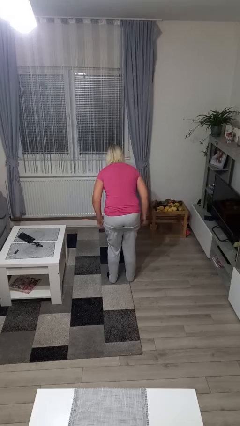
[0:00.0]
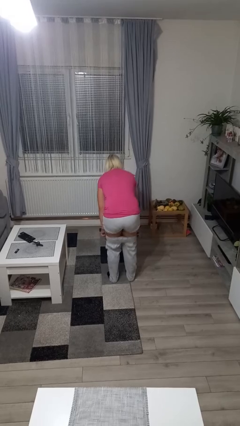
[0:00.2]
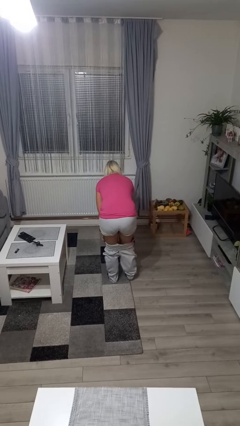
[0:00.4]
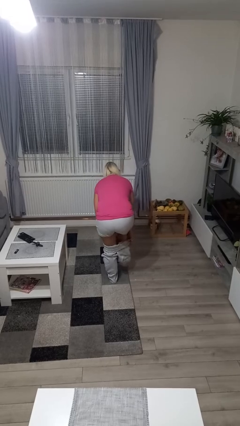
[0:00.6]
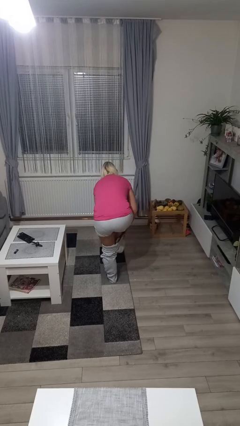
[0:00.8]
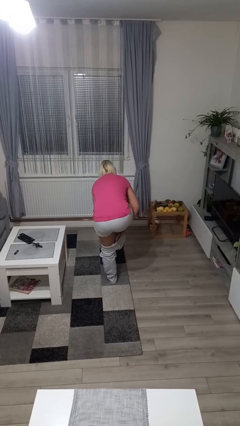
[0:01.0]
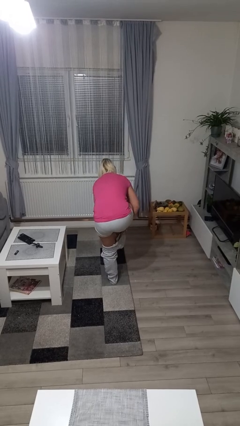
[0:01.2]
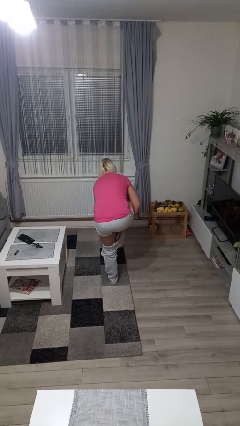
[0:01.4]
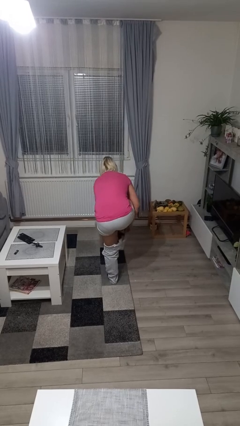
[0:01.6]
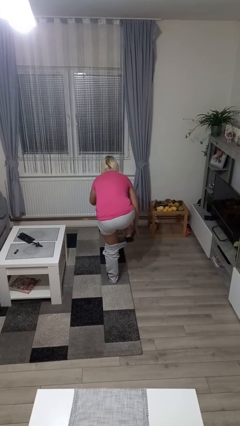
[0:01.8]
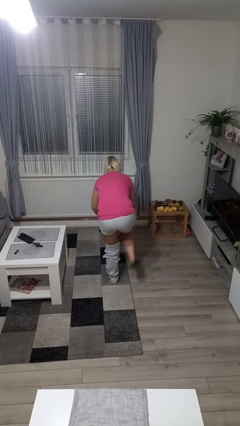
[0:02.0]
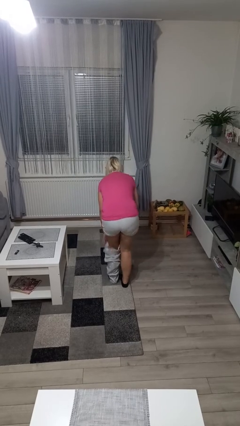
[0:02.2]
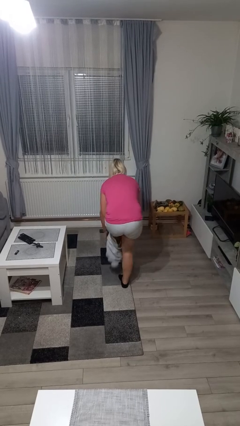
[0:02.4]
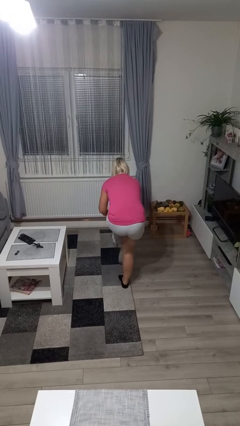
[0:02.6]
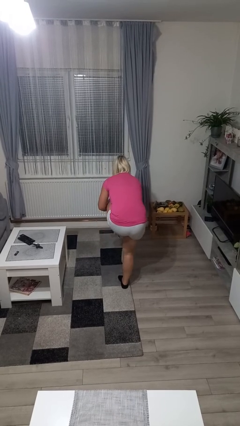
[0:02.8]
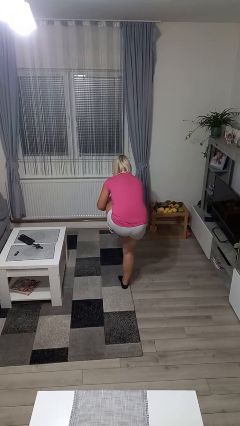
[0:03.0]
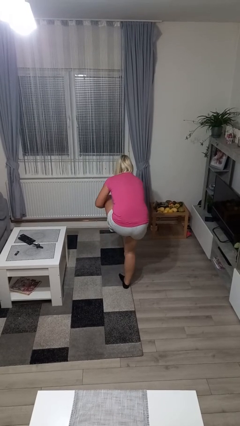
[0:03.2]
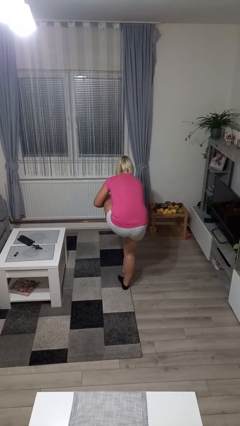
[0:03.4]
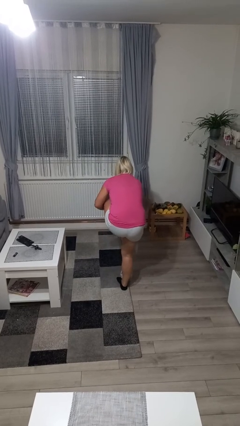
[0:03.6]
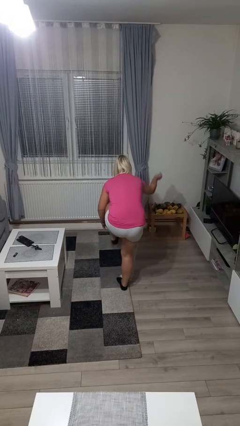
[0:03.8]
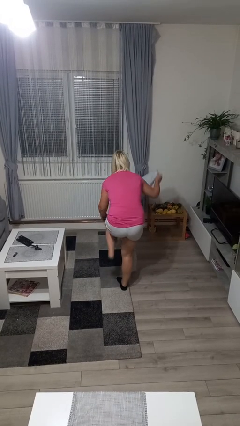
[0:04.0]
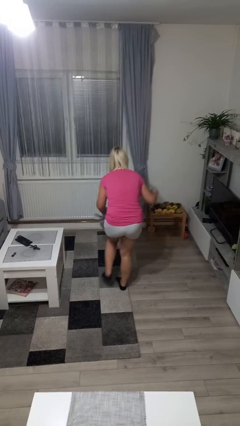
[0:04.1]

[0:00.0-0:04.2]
person takes off pants

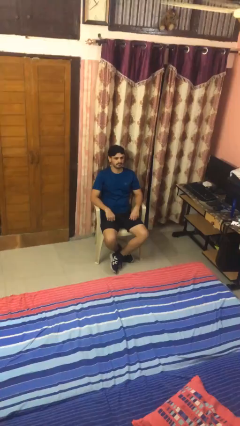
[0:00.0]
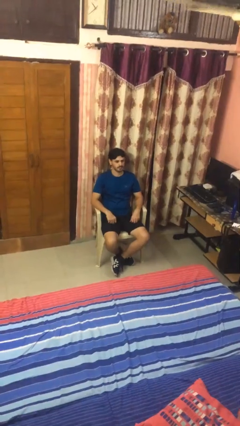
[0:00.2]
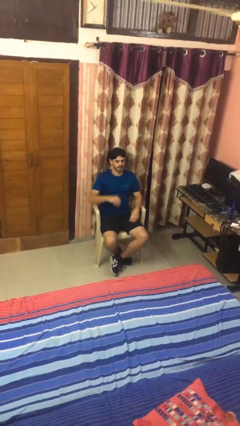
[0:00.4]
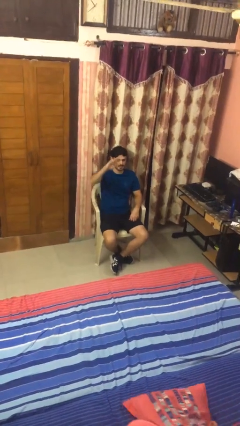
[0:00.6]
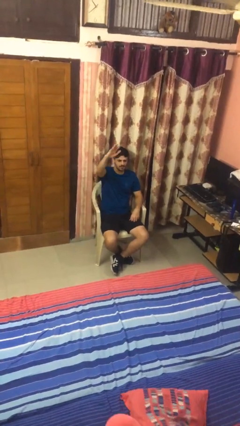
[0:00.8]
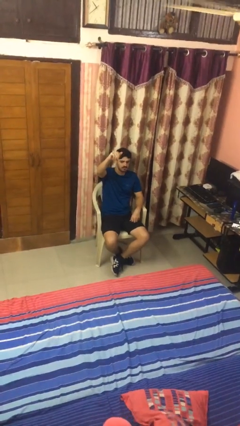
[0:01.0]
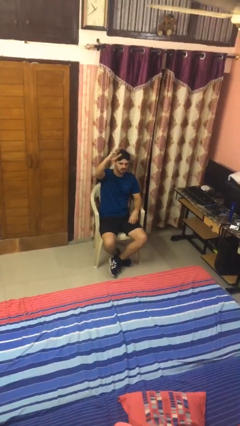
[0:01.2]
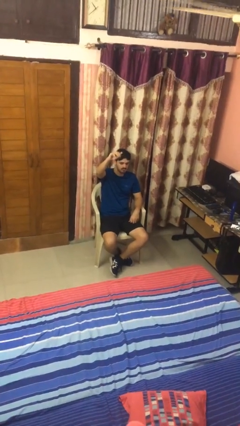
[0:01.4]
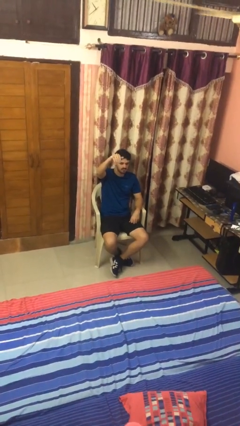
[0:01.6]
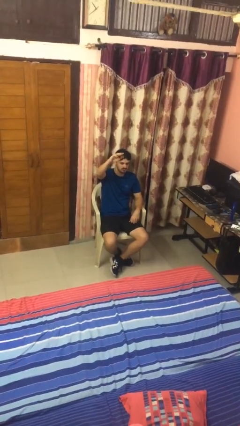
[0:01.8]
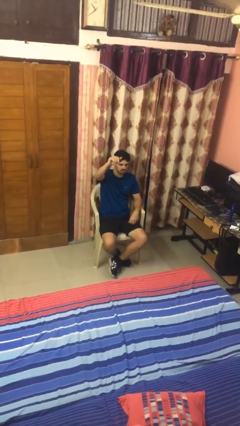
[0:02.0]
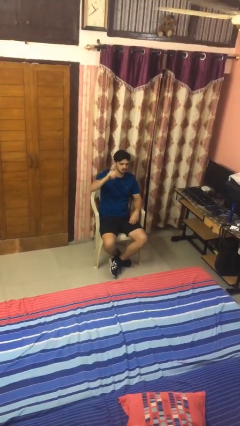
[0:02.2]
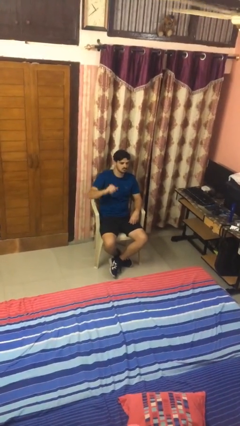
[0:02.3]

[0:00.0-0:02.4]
person gestures come here

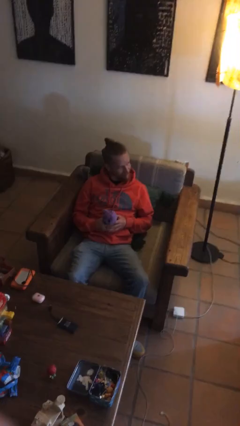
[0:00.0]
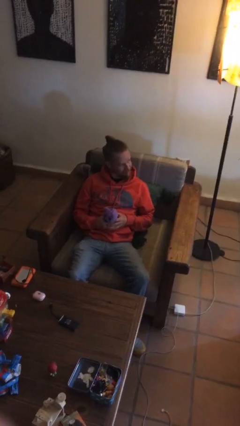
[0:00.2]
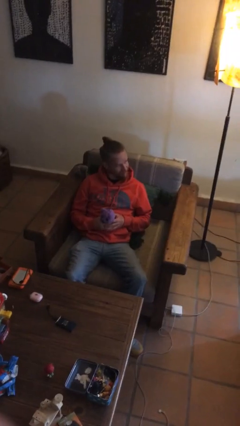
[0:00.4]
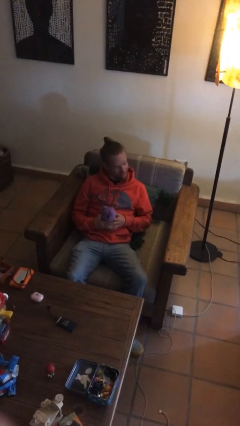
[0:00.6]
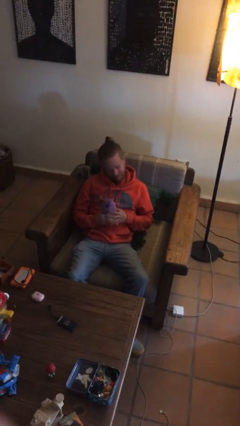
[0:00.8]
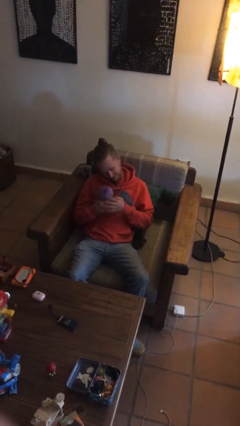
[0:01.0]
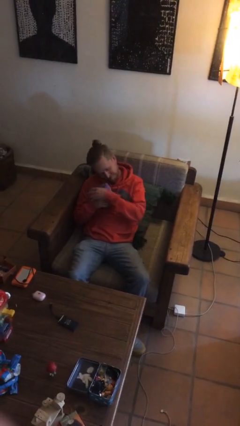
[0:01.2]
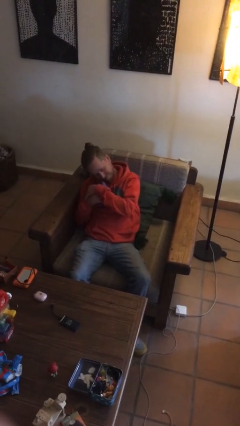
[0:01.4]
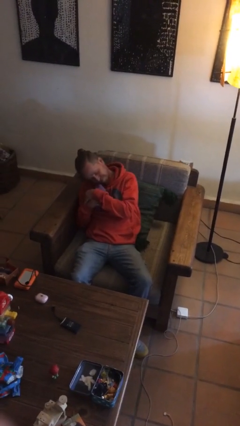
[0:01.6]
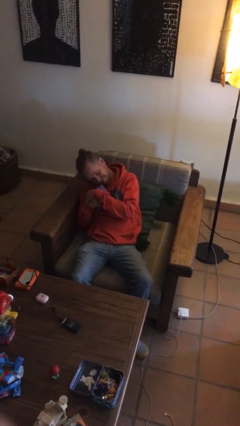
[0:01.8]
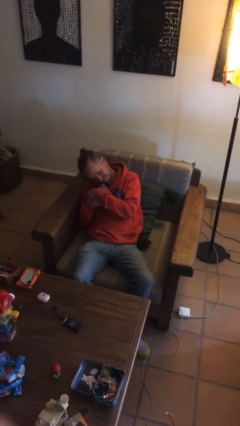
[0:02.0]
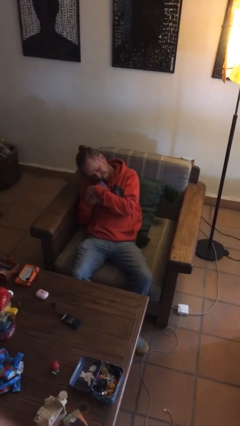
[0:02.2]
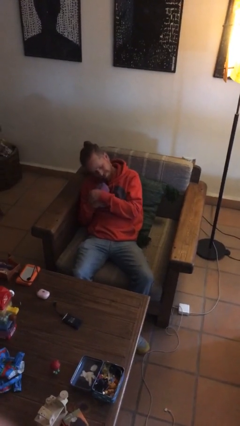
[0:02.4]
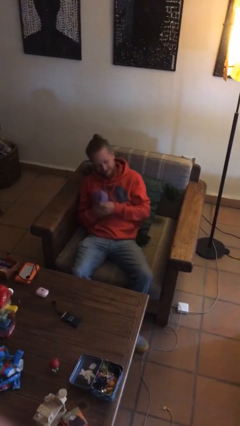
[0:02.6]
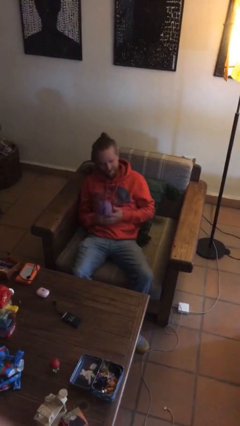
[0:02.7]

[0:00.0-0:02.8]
person hugs stuffed animal

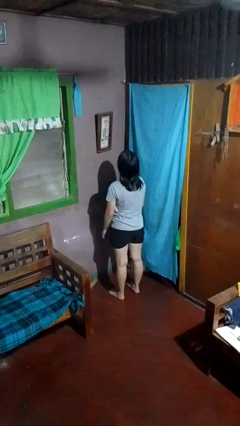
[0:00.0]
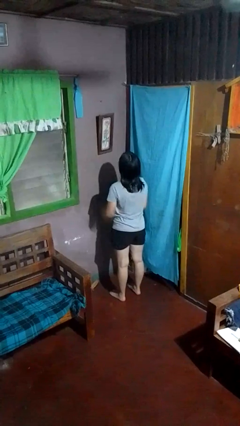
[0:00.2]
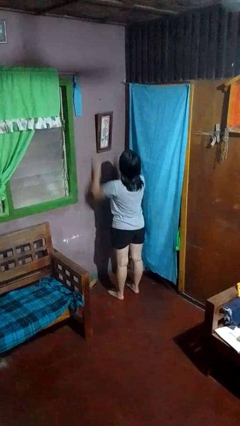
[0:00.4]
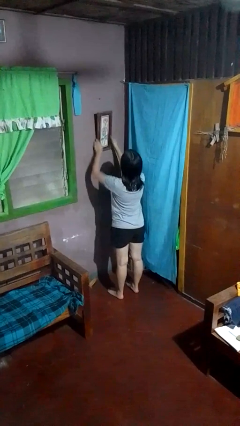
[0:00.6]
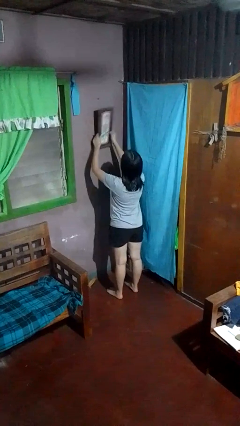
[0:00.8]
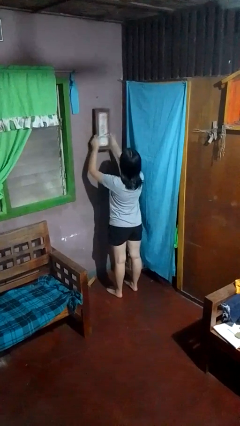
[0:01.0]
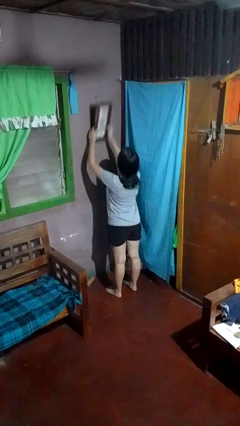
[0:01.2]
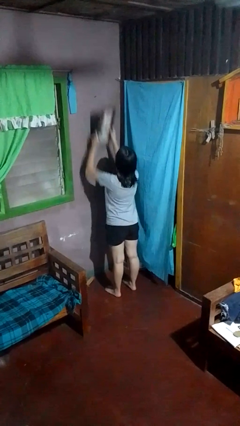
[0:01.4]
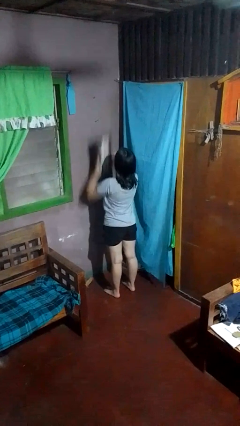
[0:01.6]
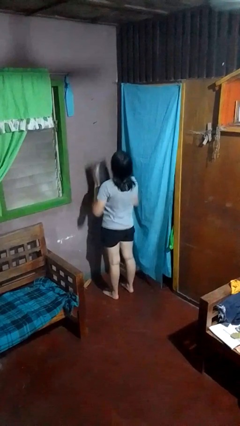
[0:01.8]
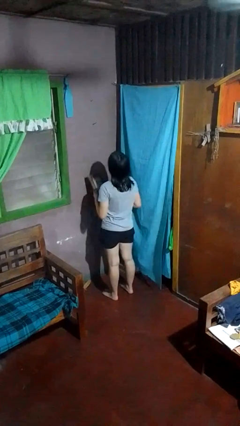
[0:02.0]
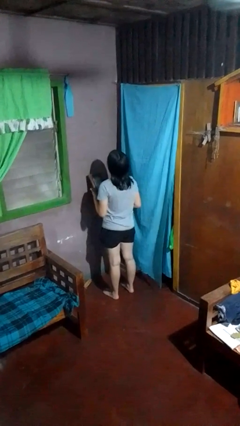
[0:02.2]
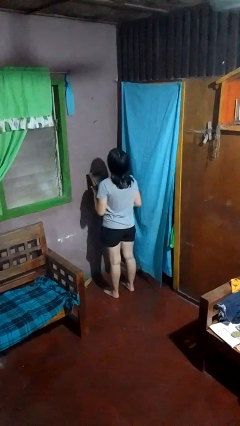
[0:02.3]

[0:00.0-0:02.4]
person takes down picture frame

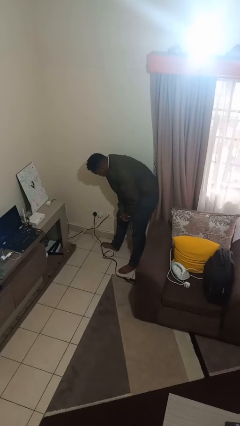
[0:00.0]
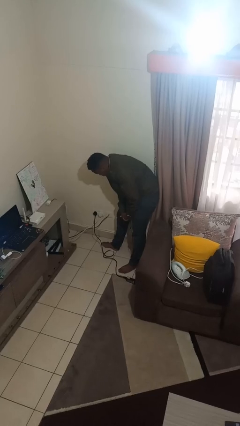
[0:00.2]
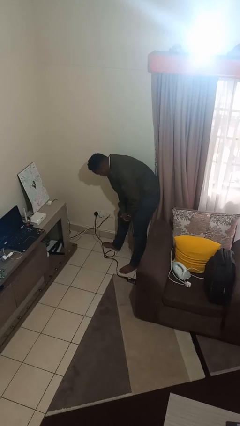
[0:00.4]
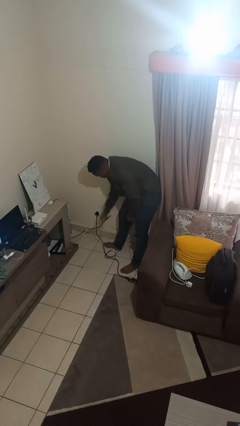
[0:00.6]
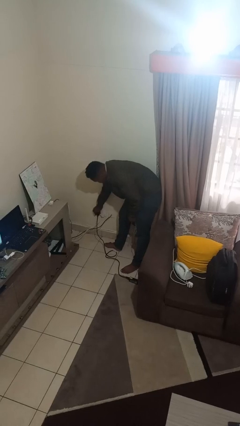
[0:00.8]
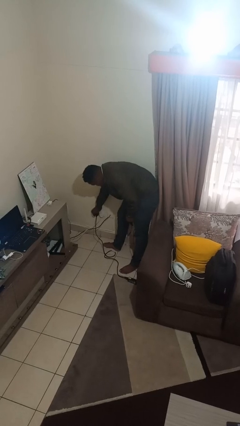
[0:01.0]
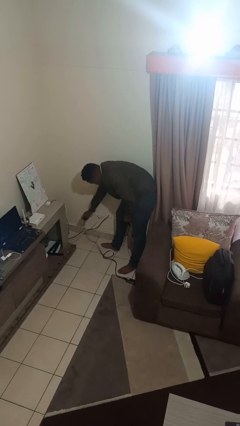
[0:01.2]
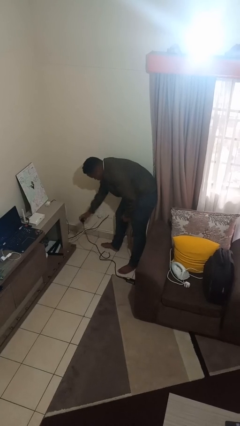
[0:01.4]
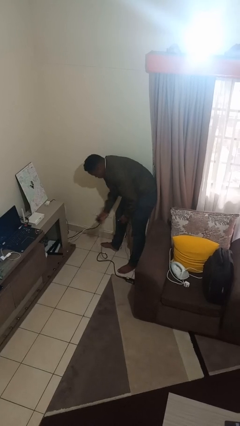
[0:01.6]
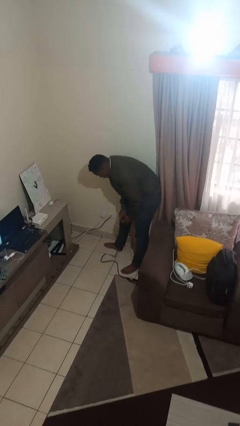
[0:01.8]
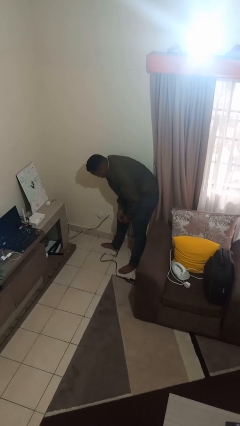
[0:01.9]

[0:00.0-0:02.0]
person unplugs from electrical socket

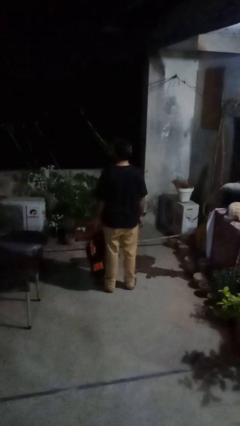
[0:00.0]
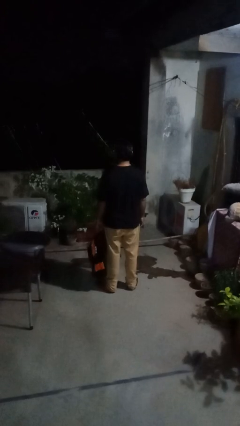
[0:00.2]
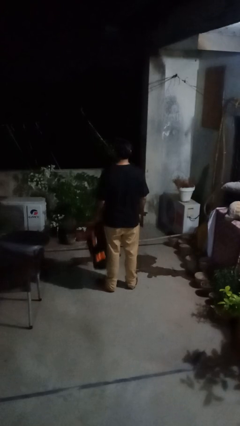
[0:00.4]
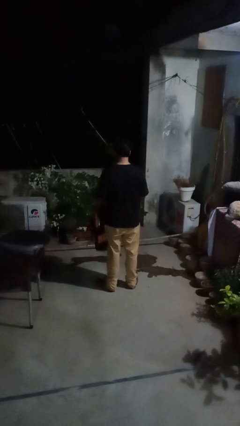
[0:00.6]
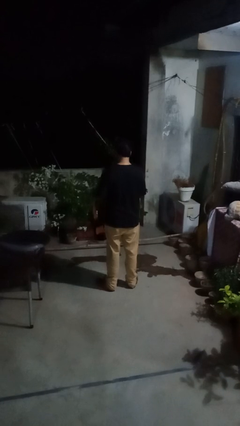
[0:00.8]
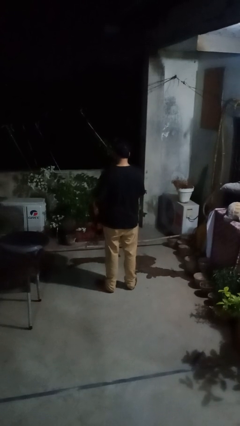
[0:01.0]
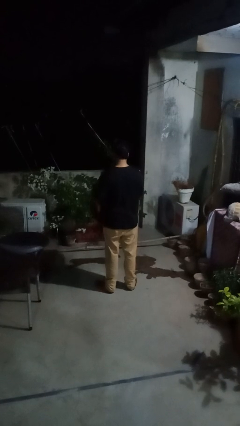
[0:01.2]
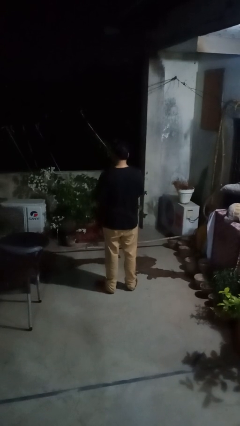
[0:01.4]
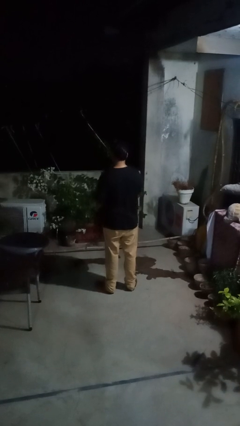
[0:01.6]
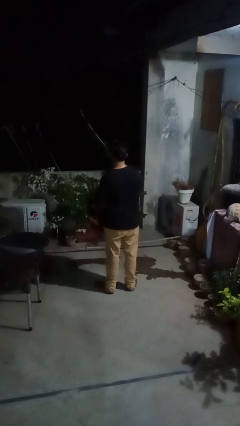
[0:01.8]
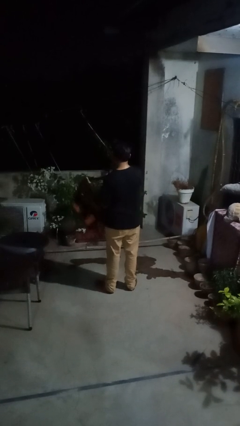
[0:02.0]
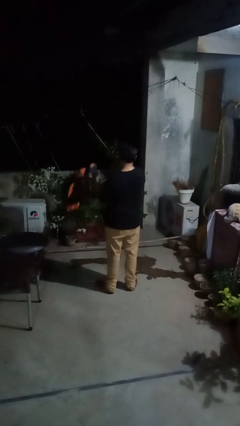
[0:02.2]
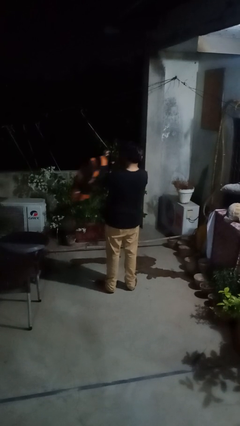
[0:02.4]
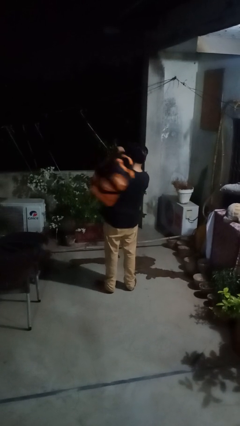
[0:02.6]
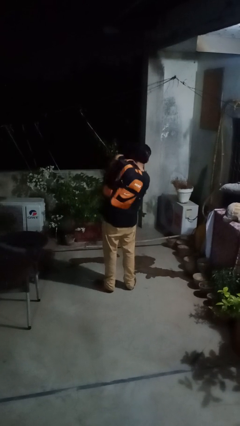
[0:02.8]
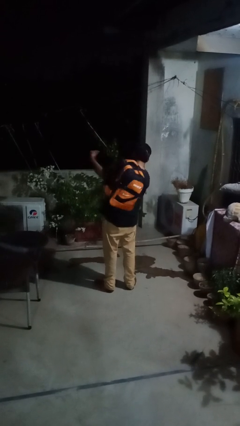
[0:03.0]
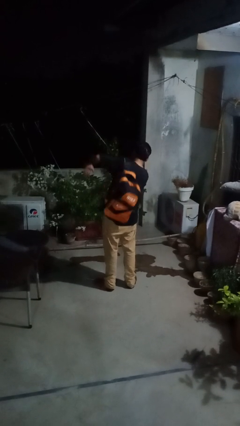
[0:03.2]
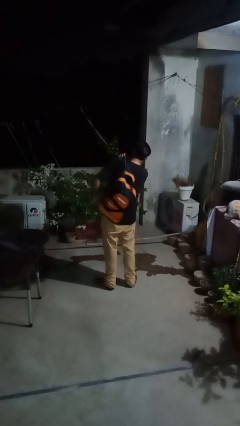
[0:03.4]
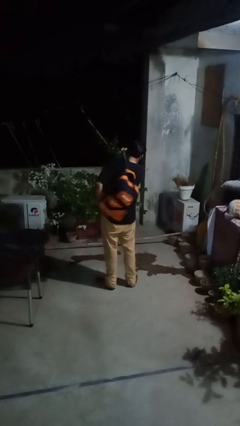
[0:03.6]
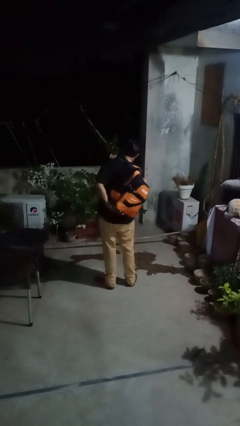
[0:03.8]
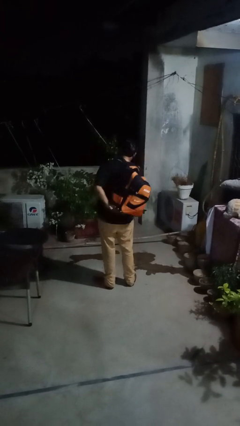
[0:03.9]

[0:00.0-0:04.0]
person puts on backpack
